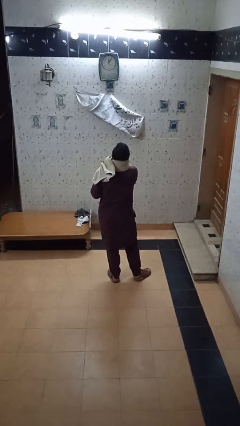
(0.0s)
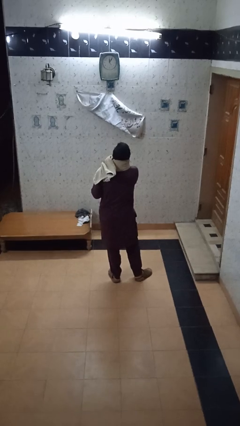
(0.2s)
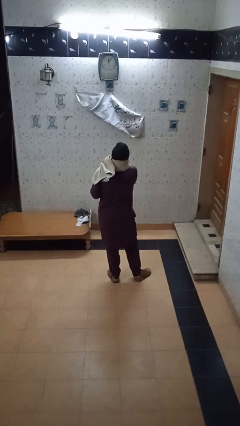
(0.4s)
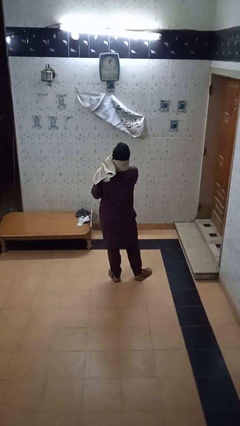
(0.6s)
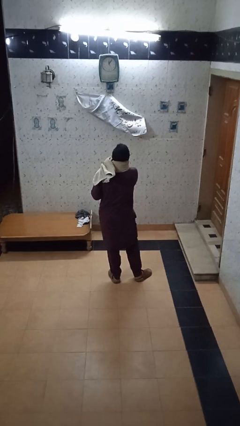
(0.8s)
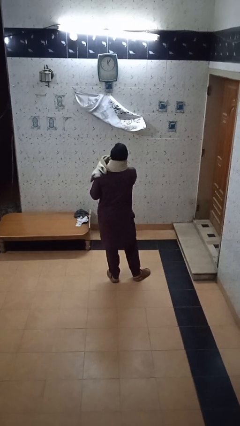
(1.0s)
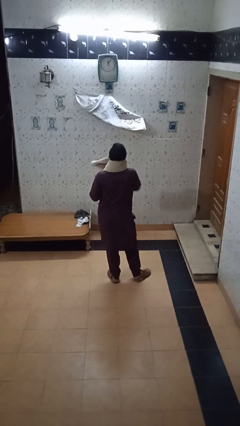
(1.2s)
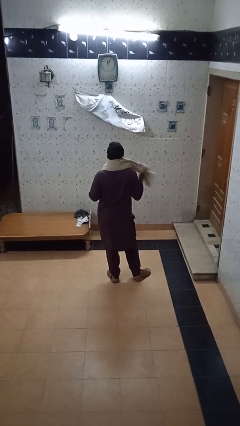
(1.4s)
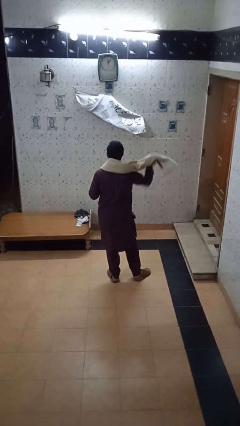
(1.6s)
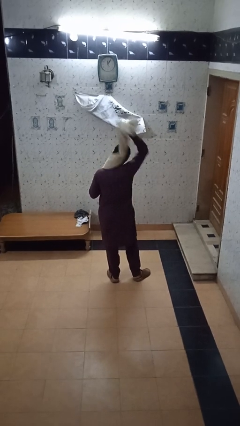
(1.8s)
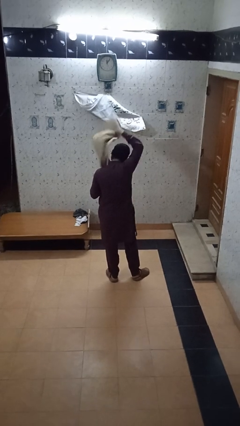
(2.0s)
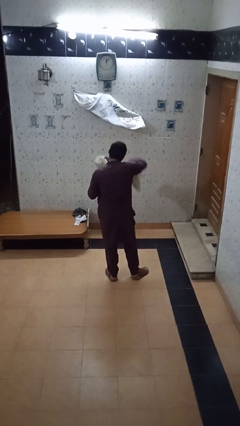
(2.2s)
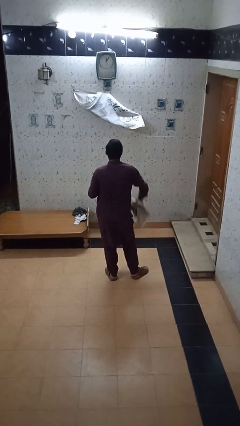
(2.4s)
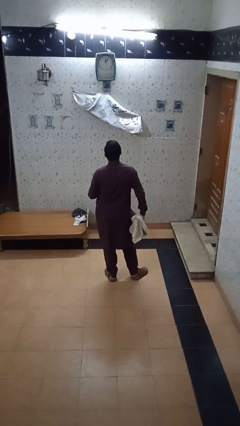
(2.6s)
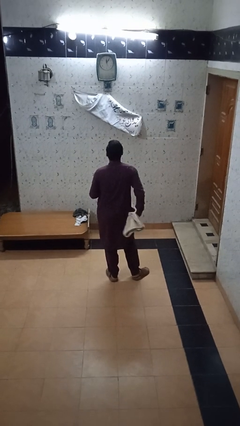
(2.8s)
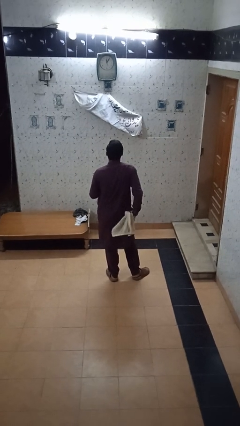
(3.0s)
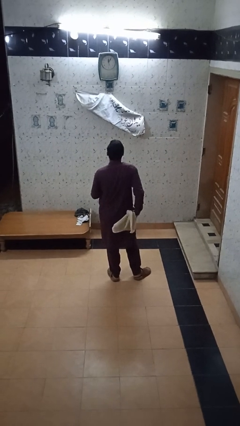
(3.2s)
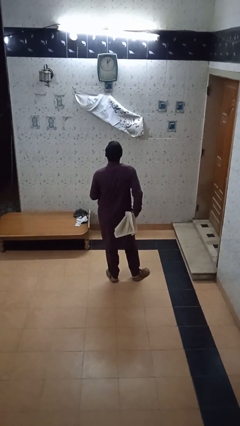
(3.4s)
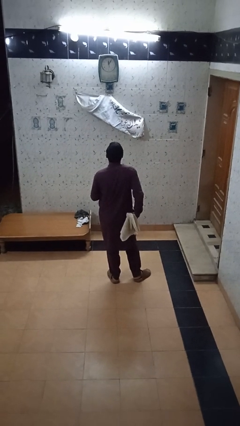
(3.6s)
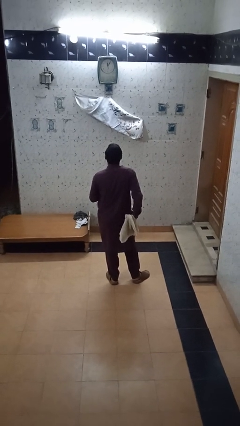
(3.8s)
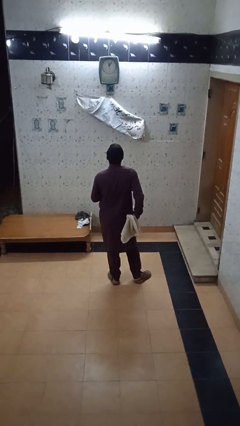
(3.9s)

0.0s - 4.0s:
person takes off scarf

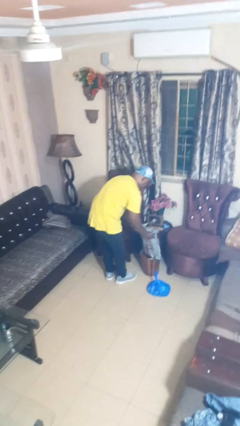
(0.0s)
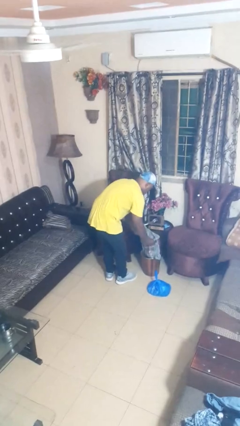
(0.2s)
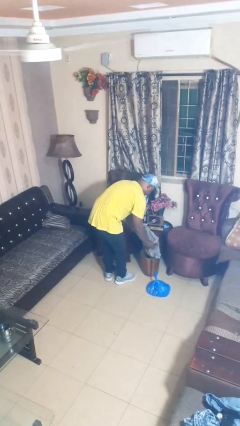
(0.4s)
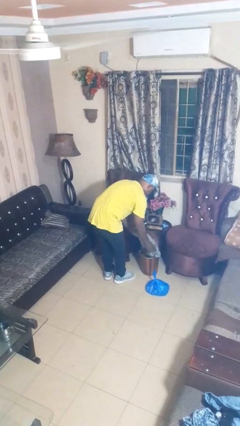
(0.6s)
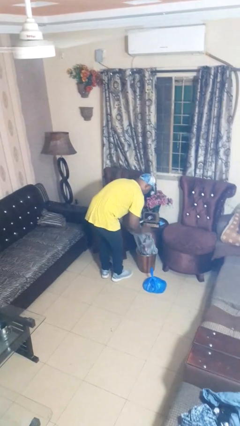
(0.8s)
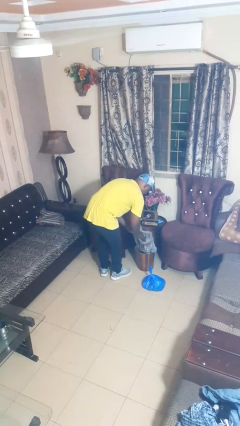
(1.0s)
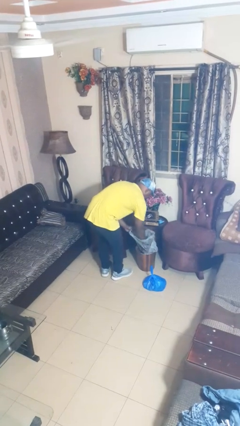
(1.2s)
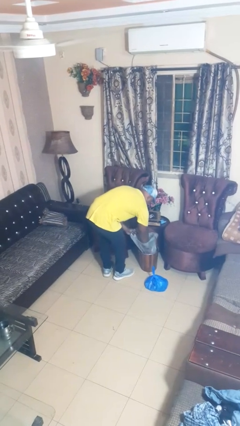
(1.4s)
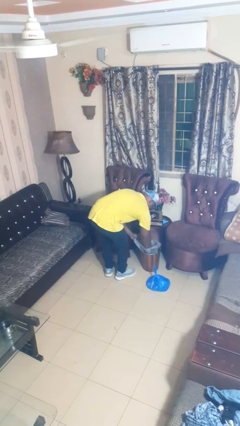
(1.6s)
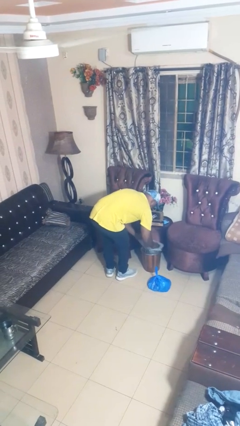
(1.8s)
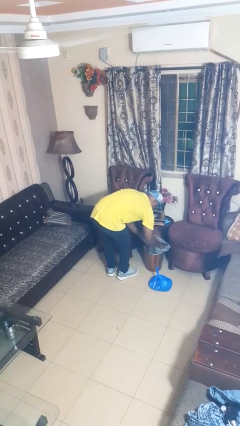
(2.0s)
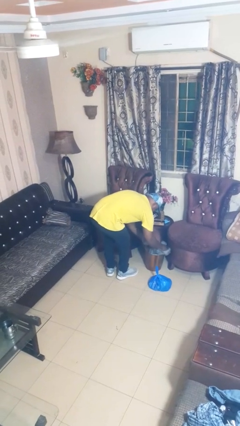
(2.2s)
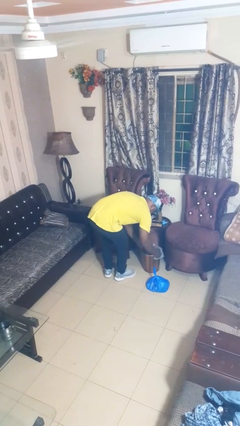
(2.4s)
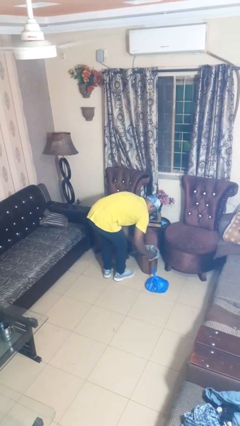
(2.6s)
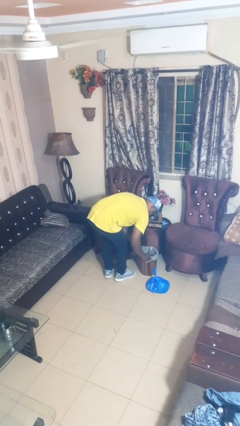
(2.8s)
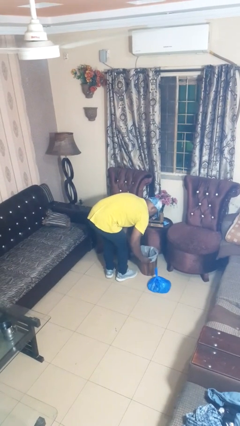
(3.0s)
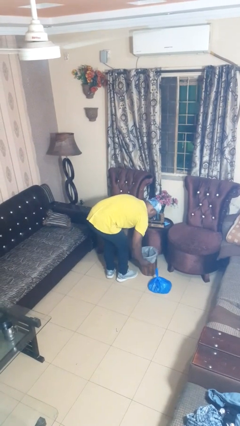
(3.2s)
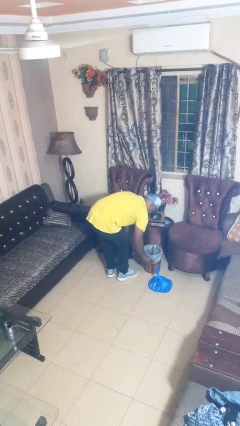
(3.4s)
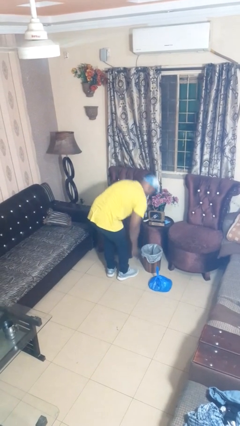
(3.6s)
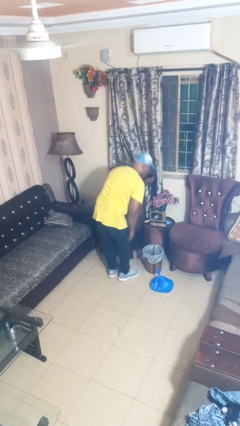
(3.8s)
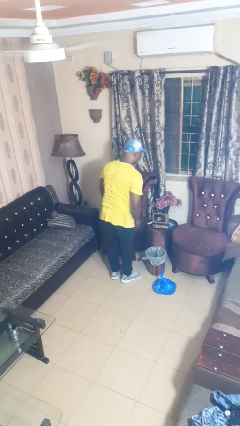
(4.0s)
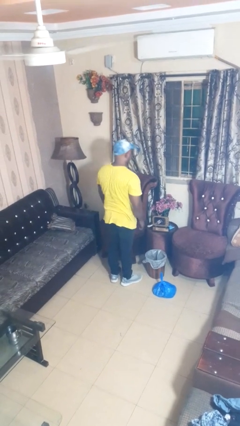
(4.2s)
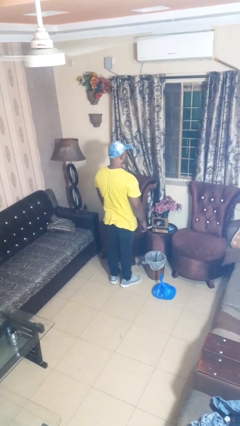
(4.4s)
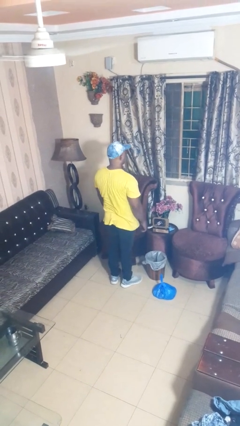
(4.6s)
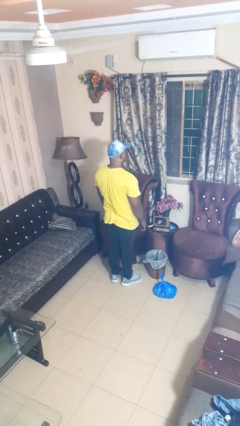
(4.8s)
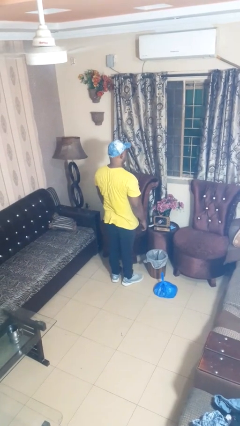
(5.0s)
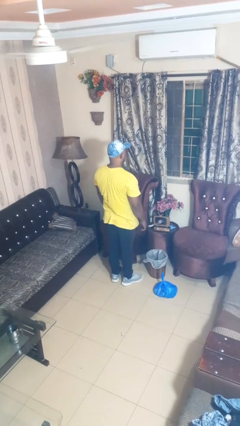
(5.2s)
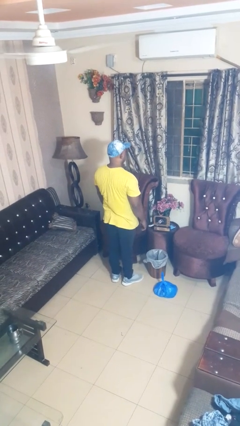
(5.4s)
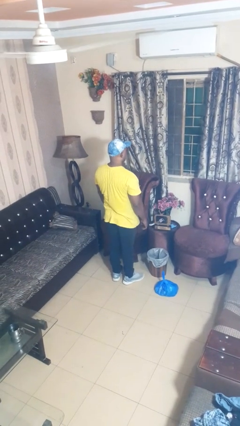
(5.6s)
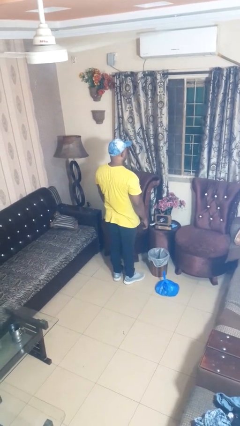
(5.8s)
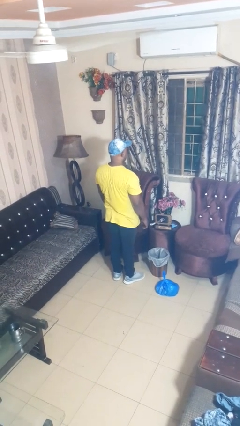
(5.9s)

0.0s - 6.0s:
person inserts trashbag into trashcan

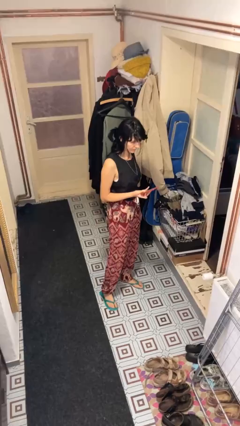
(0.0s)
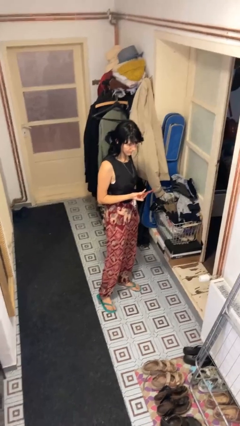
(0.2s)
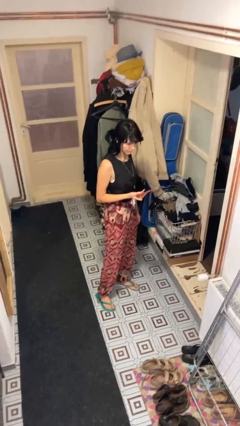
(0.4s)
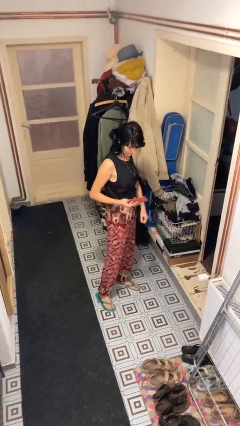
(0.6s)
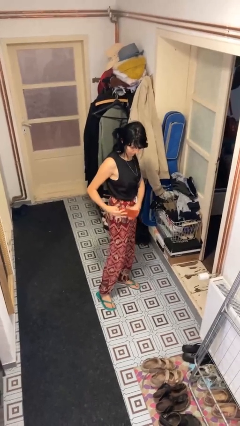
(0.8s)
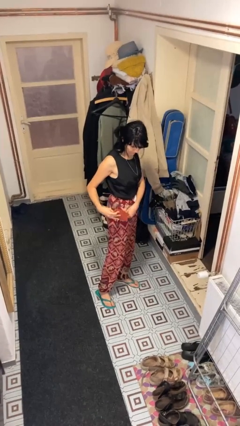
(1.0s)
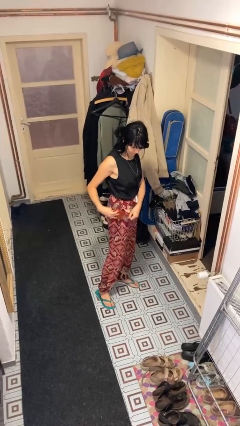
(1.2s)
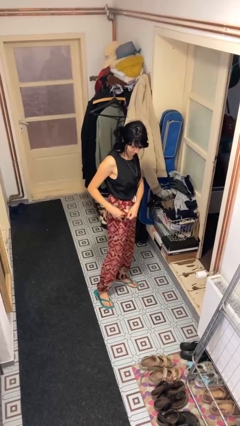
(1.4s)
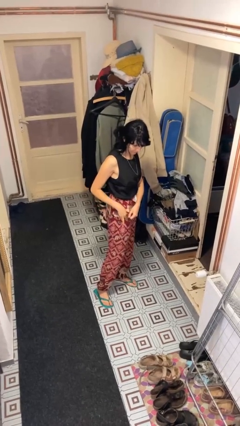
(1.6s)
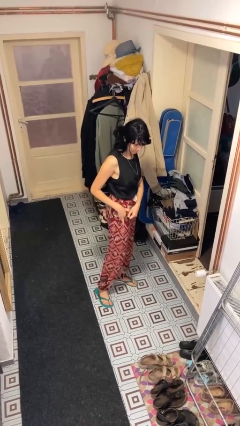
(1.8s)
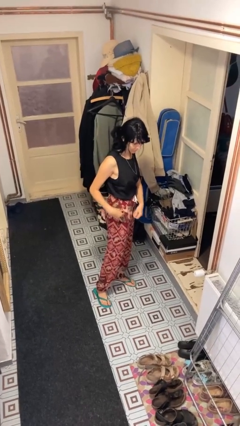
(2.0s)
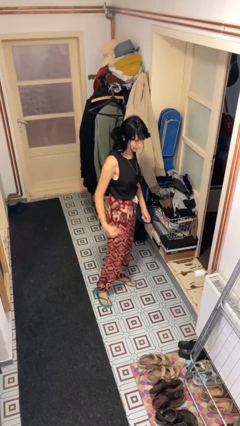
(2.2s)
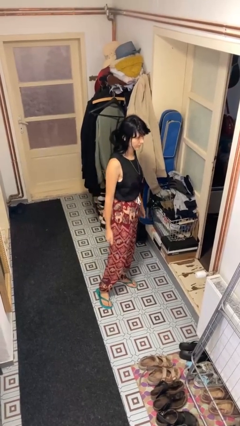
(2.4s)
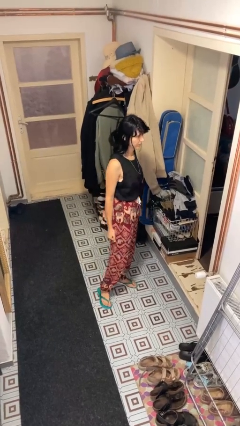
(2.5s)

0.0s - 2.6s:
person puts phone into pocket

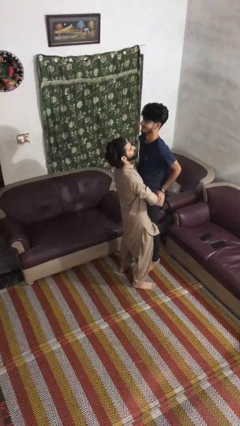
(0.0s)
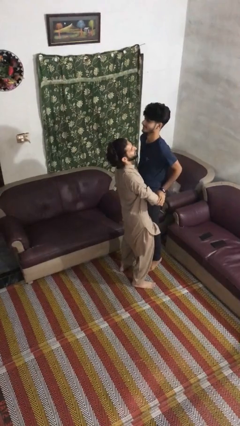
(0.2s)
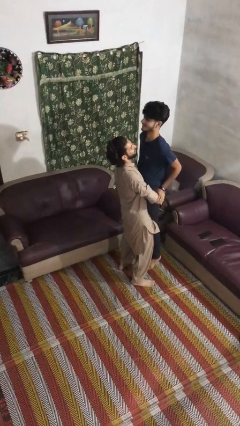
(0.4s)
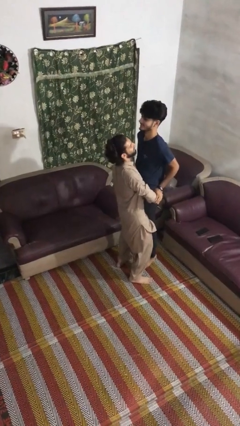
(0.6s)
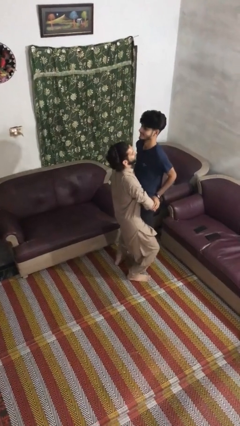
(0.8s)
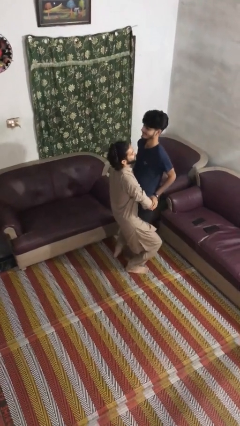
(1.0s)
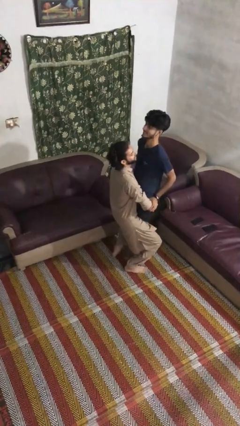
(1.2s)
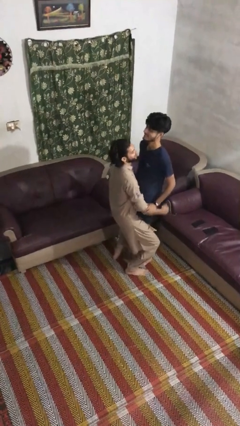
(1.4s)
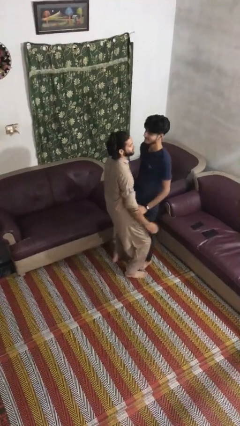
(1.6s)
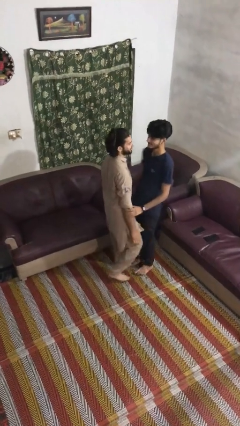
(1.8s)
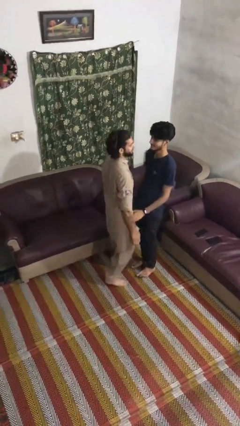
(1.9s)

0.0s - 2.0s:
person puts down person

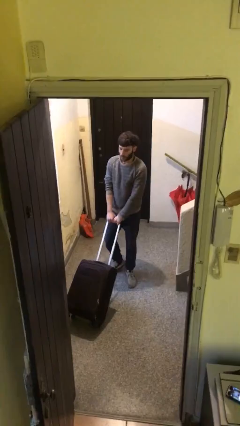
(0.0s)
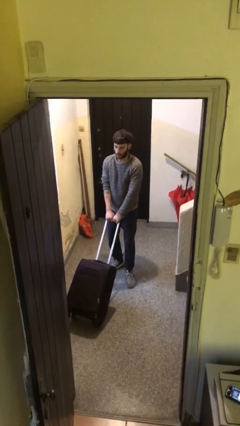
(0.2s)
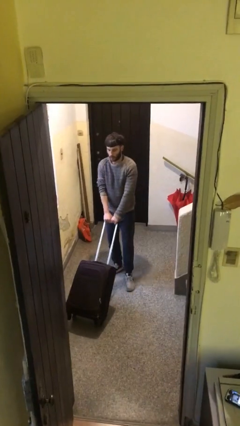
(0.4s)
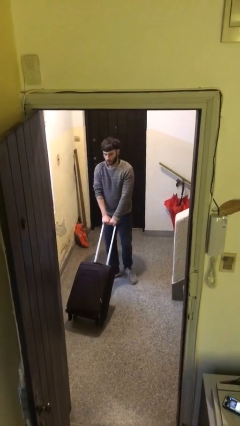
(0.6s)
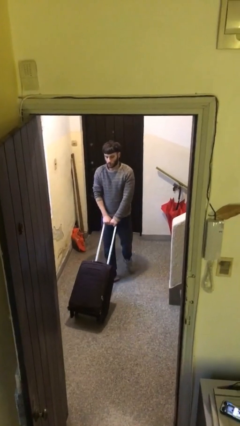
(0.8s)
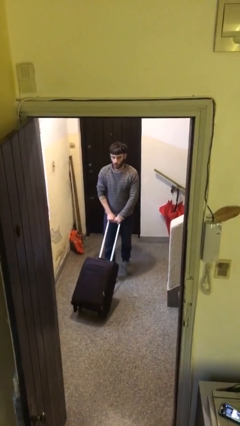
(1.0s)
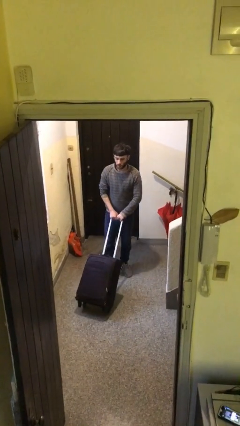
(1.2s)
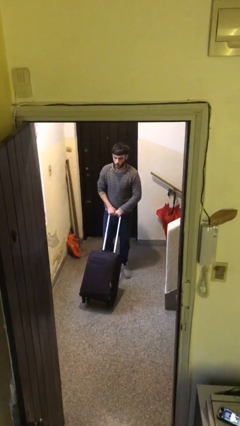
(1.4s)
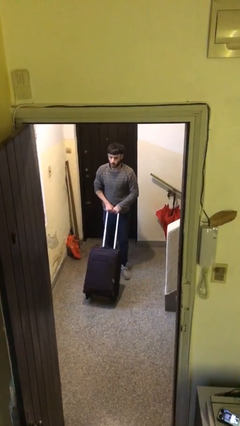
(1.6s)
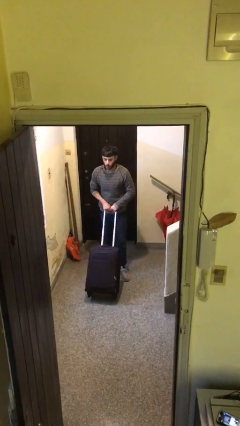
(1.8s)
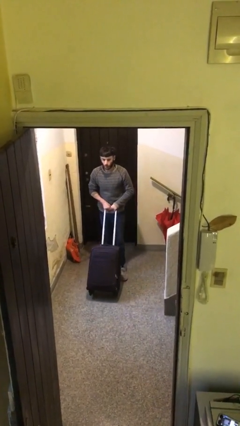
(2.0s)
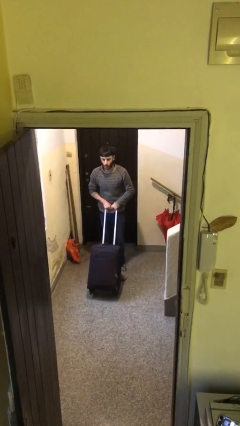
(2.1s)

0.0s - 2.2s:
person pulls wheeled cart

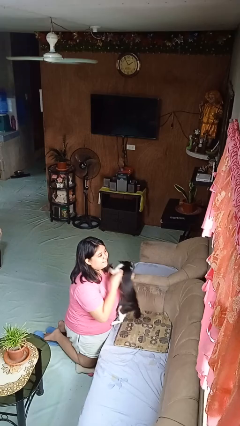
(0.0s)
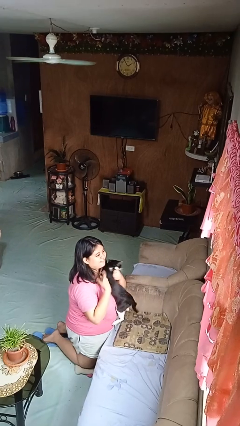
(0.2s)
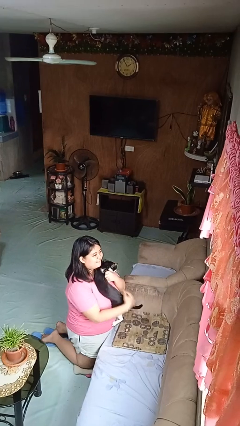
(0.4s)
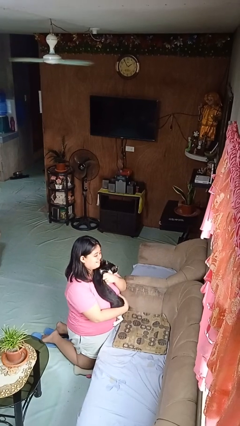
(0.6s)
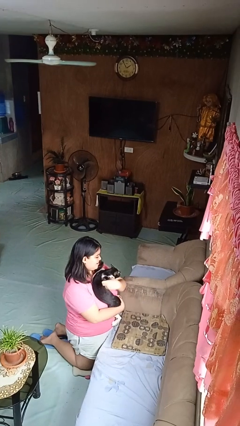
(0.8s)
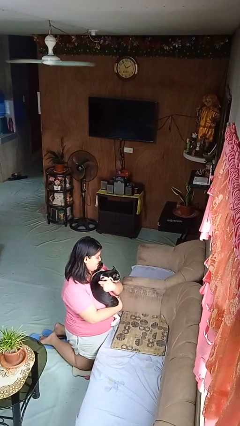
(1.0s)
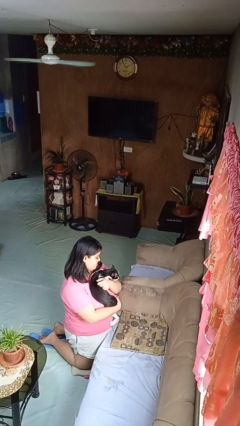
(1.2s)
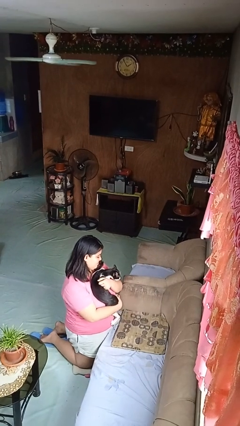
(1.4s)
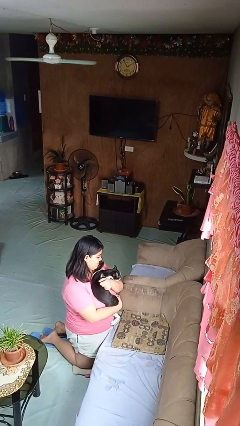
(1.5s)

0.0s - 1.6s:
person hugs cat
